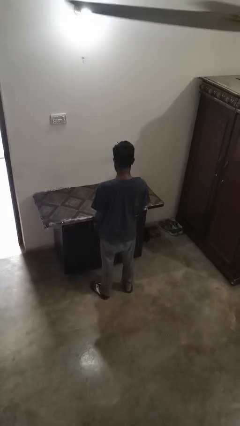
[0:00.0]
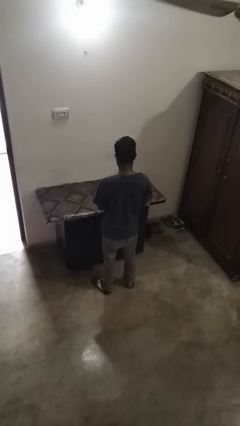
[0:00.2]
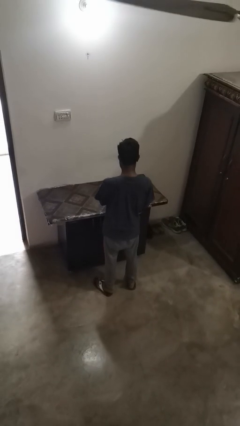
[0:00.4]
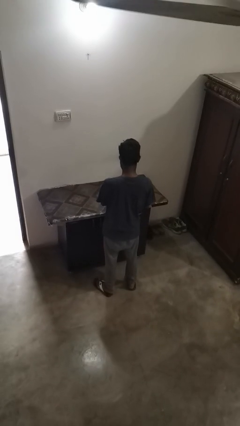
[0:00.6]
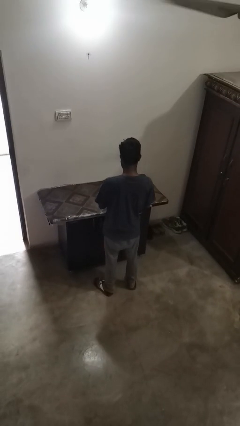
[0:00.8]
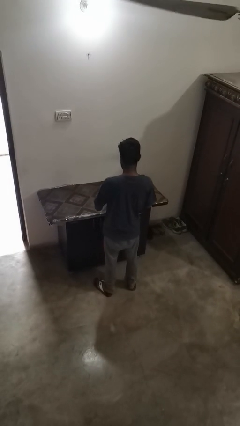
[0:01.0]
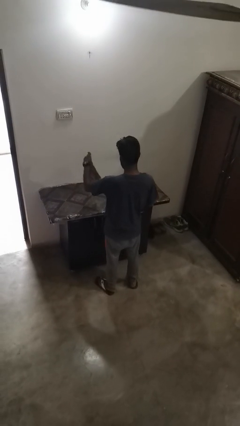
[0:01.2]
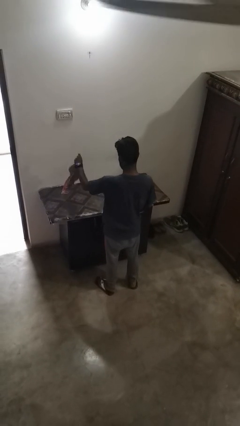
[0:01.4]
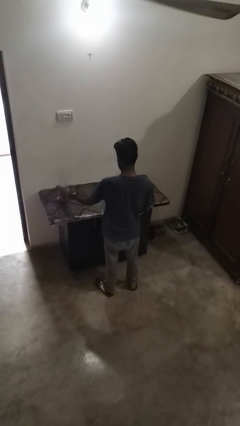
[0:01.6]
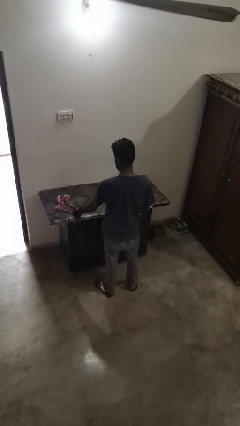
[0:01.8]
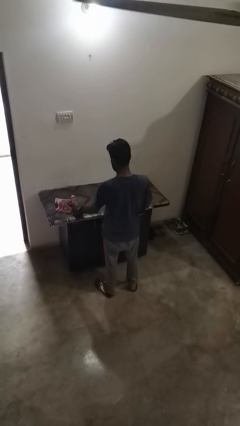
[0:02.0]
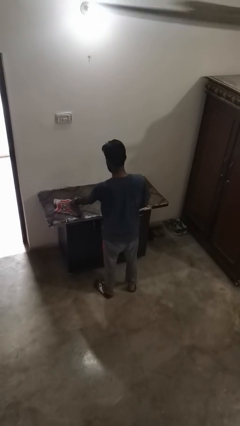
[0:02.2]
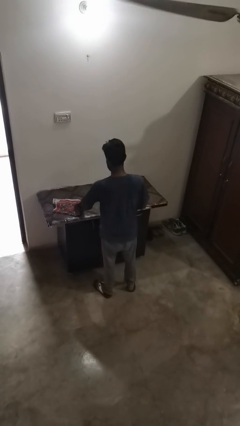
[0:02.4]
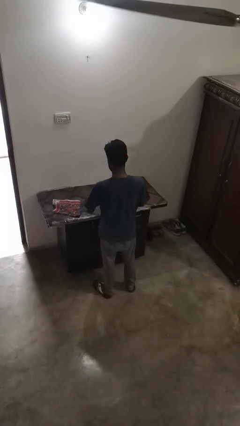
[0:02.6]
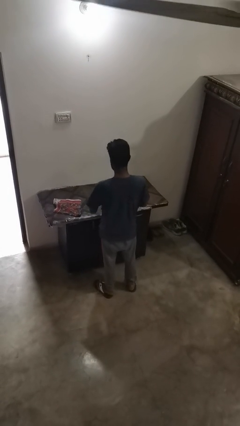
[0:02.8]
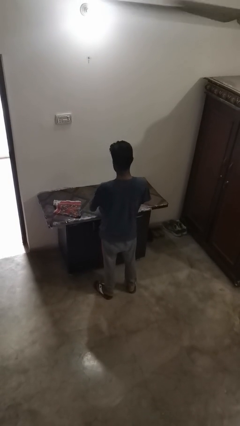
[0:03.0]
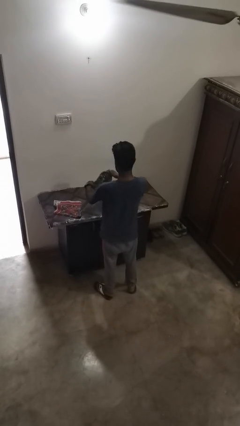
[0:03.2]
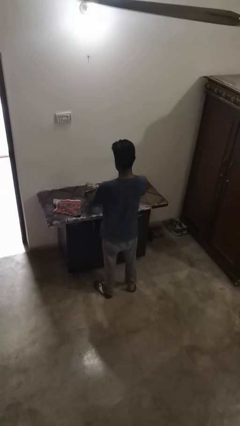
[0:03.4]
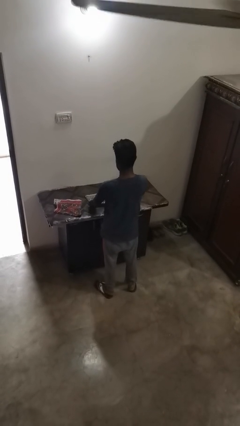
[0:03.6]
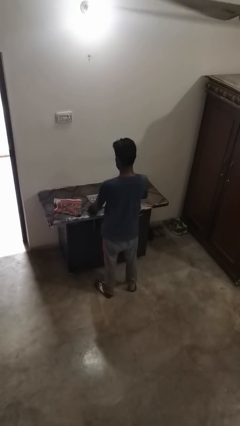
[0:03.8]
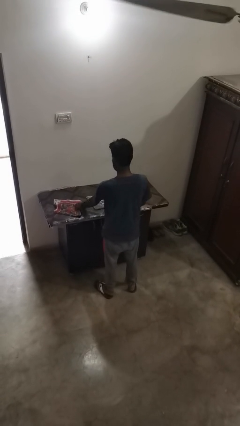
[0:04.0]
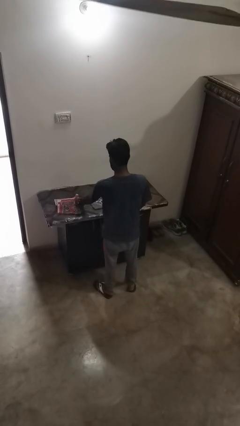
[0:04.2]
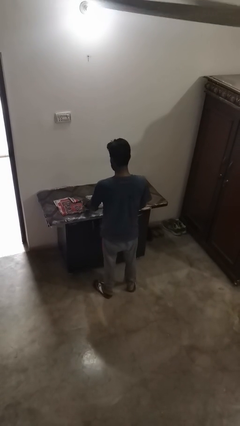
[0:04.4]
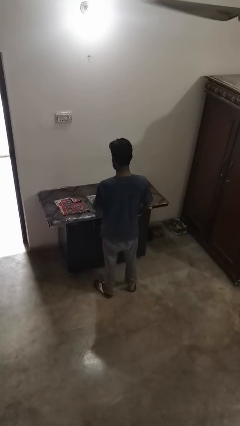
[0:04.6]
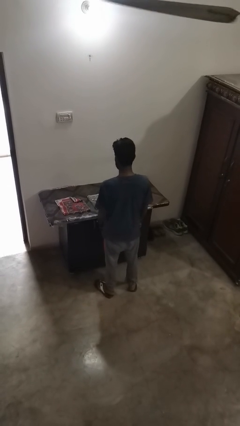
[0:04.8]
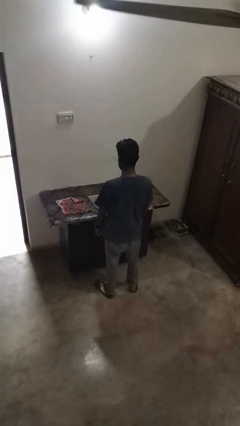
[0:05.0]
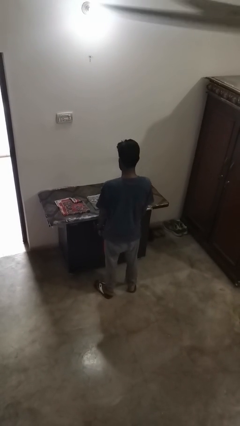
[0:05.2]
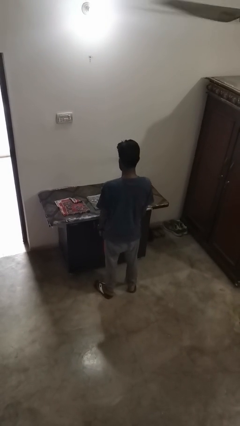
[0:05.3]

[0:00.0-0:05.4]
person spreads tablecloth

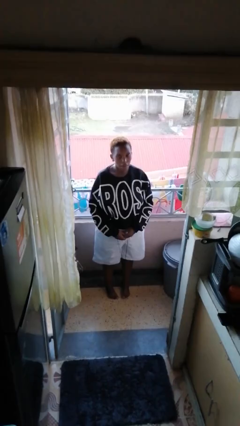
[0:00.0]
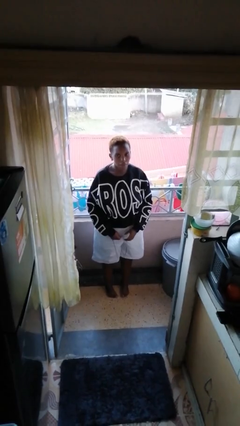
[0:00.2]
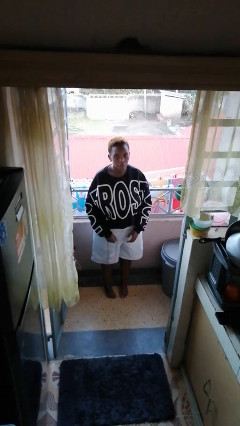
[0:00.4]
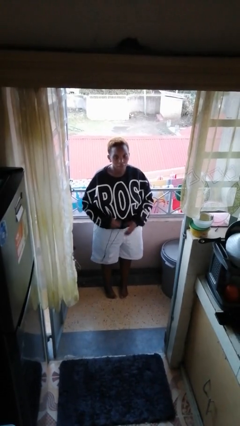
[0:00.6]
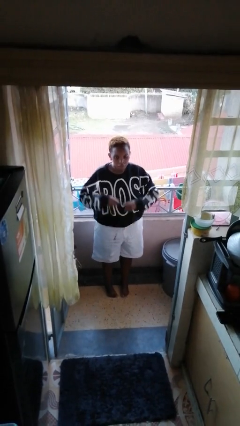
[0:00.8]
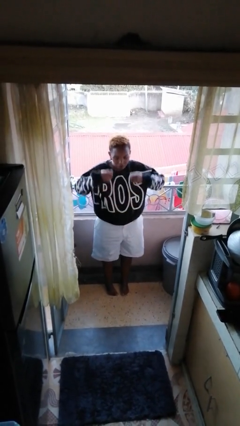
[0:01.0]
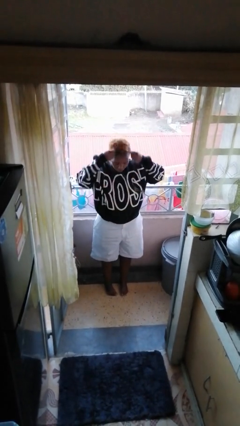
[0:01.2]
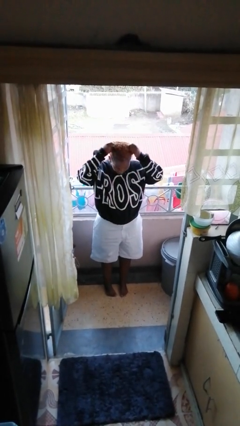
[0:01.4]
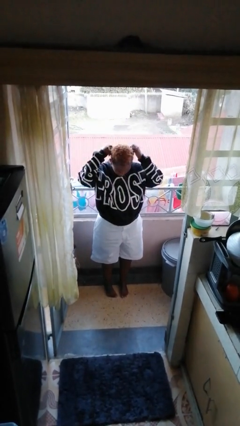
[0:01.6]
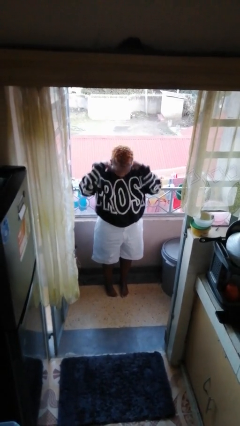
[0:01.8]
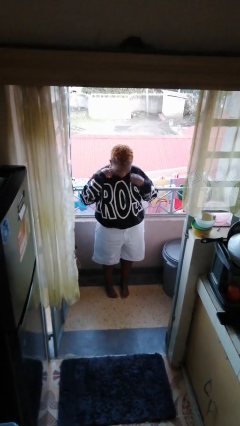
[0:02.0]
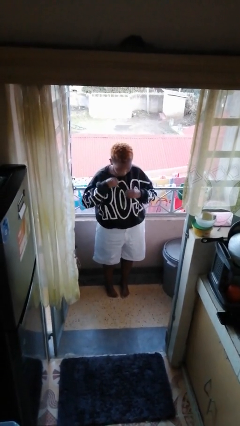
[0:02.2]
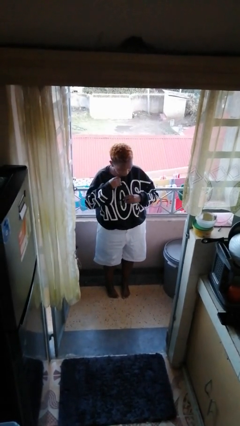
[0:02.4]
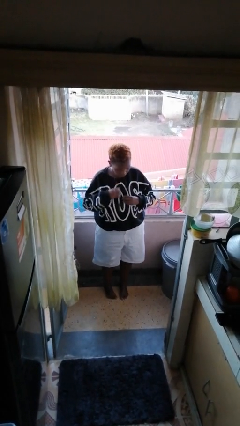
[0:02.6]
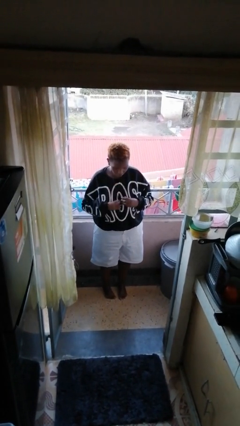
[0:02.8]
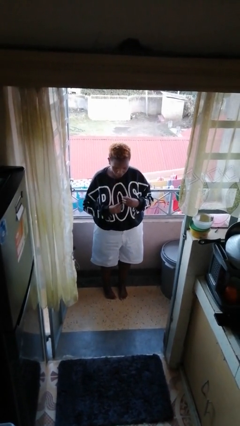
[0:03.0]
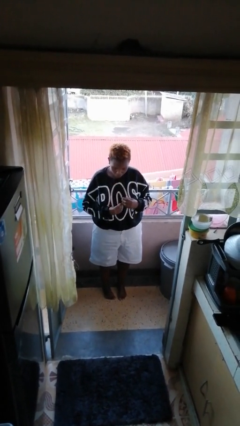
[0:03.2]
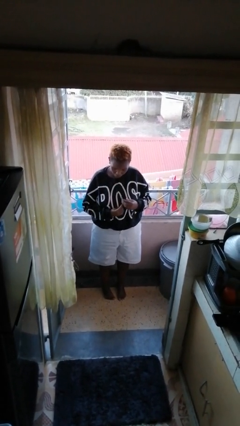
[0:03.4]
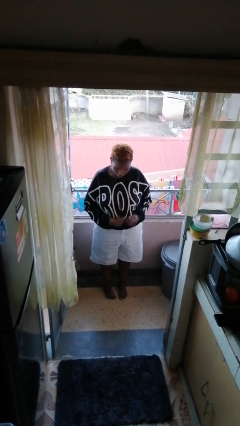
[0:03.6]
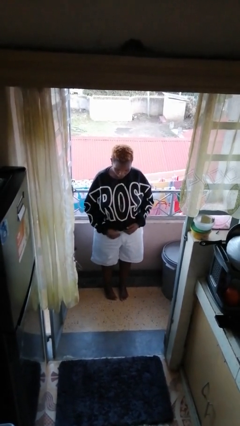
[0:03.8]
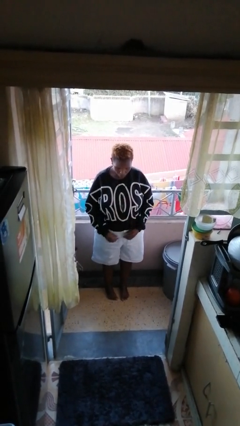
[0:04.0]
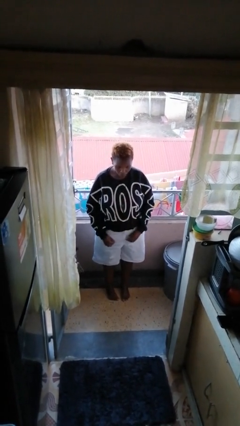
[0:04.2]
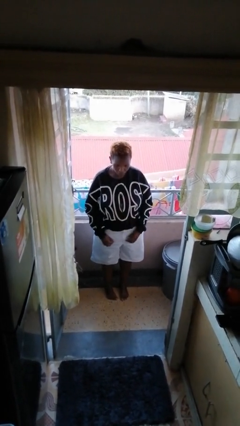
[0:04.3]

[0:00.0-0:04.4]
person puts on necklace

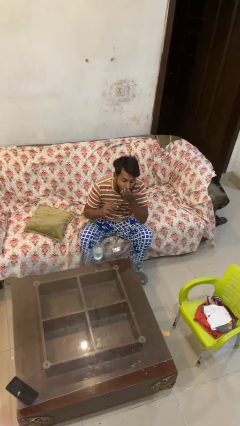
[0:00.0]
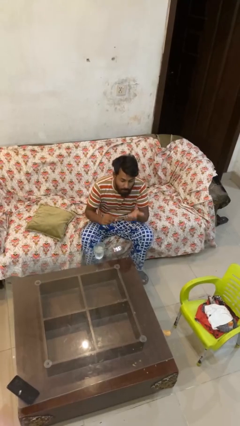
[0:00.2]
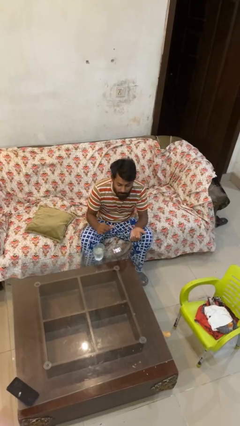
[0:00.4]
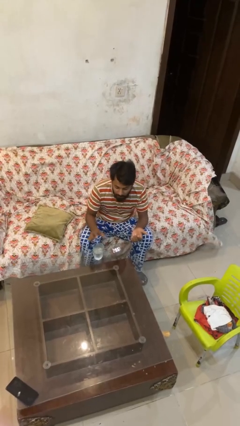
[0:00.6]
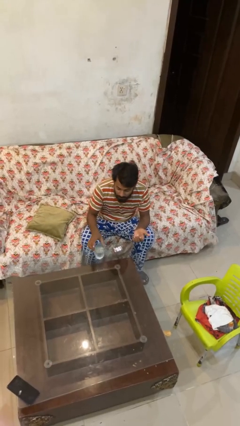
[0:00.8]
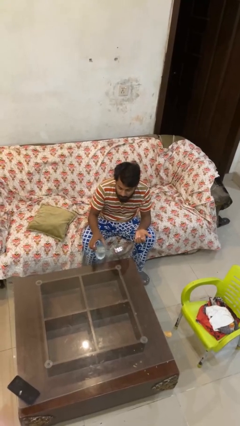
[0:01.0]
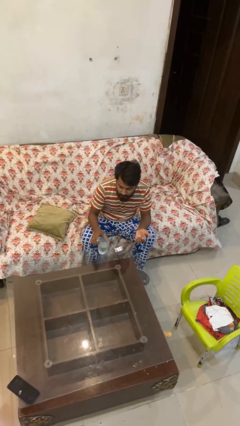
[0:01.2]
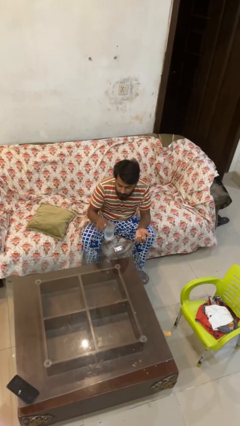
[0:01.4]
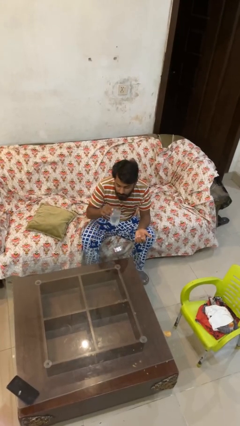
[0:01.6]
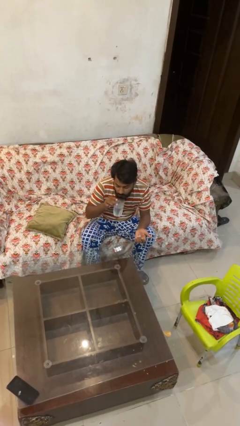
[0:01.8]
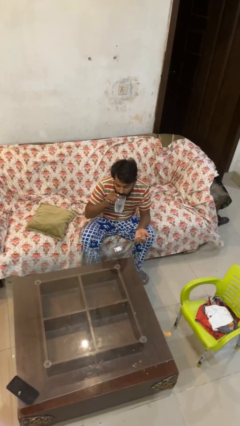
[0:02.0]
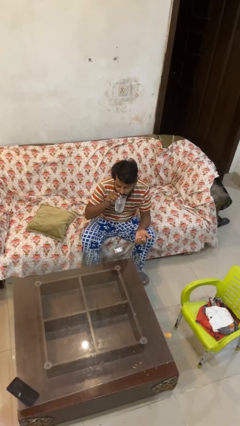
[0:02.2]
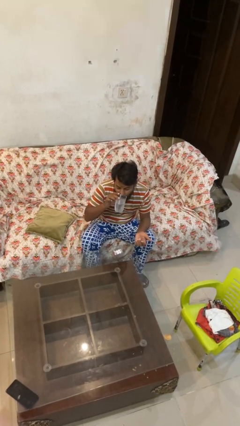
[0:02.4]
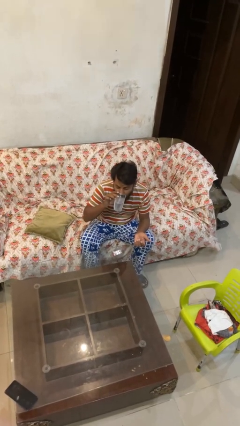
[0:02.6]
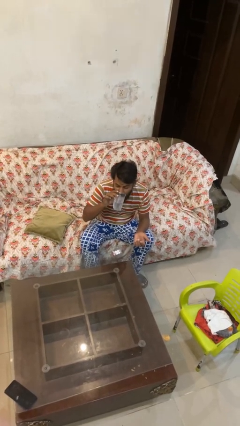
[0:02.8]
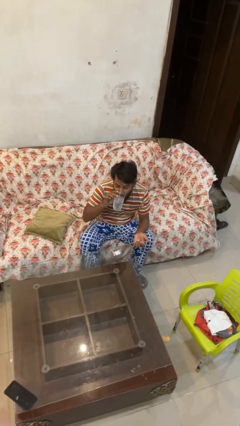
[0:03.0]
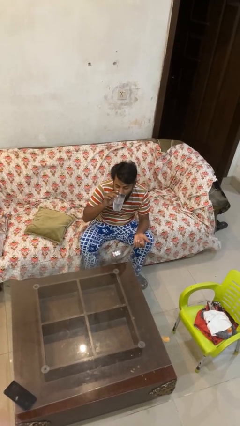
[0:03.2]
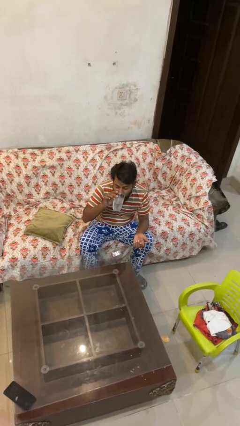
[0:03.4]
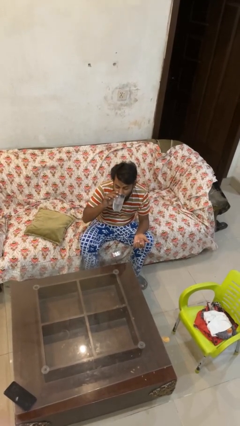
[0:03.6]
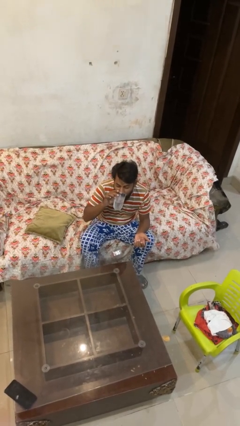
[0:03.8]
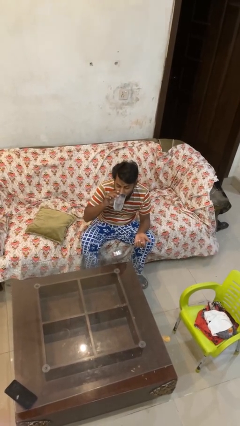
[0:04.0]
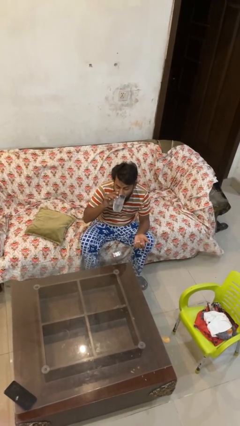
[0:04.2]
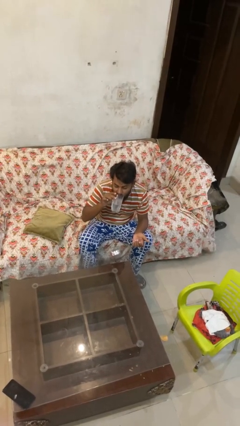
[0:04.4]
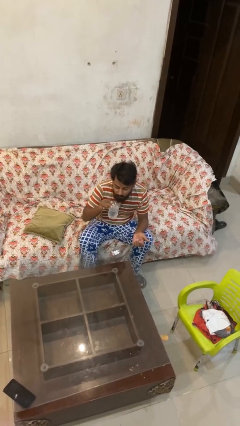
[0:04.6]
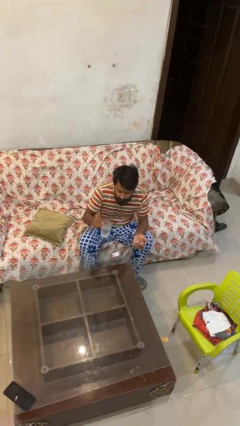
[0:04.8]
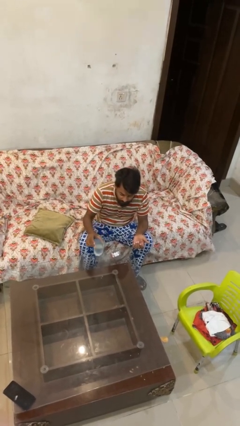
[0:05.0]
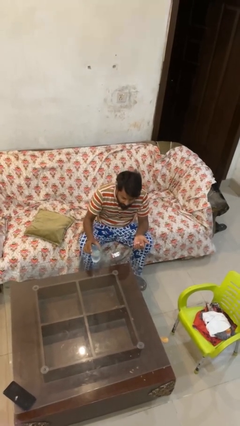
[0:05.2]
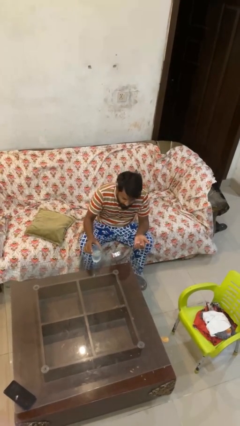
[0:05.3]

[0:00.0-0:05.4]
person drinks from cup

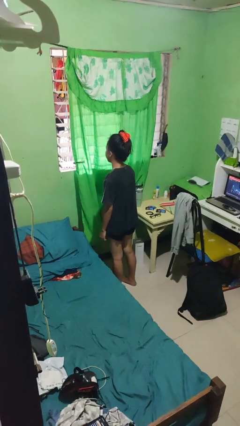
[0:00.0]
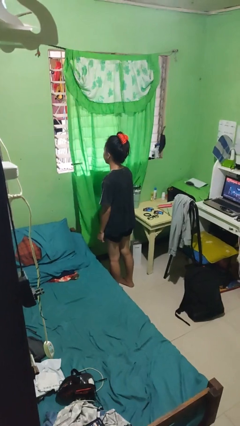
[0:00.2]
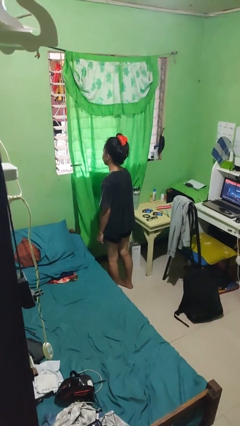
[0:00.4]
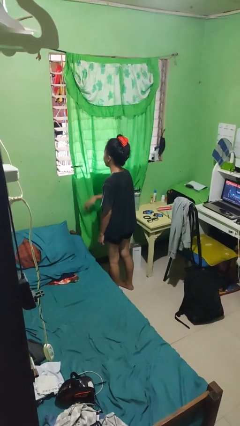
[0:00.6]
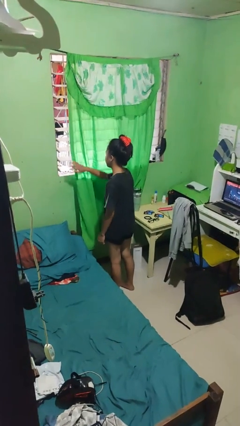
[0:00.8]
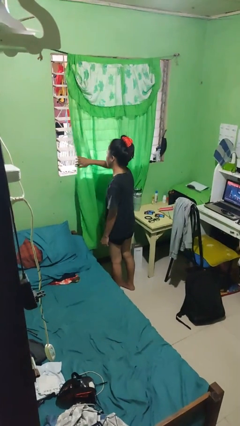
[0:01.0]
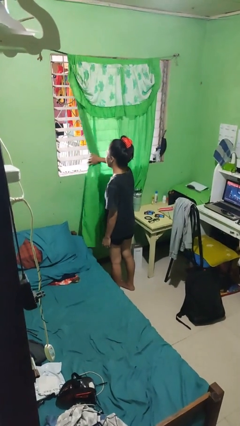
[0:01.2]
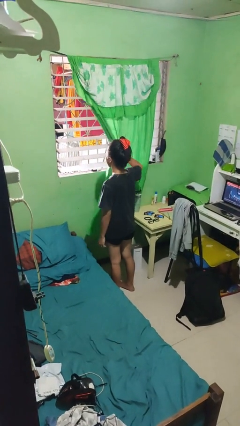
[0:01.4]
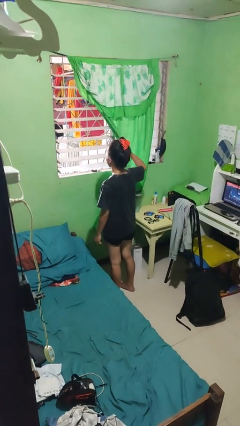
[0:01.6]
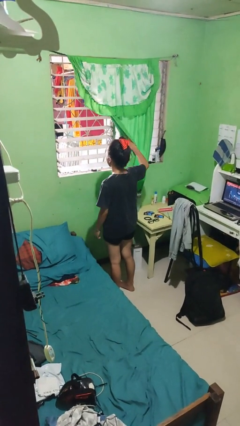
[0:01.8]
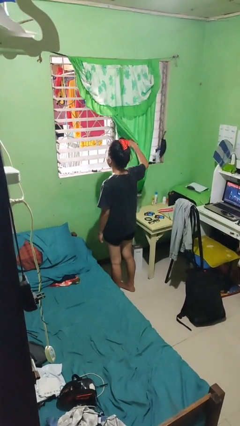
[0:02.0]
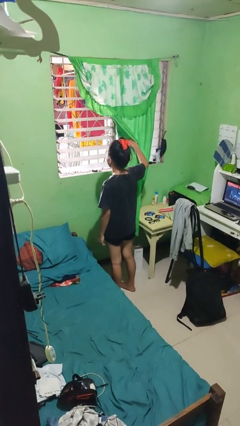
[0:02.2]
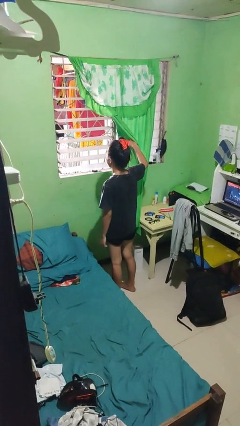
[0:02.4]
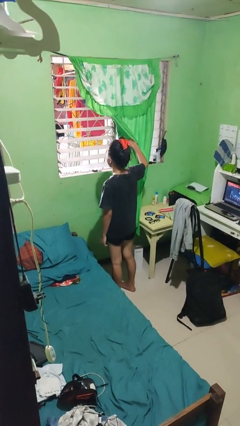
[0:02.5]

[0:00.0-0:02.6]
person opens curtains
